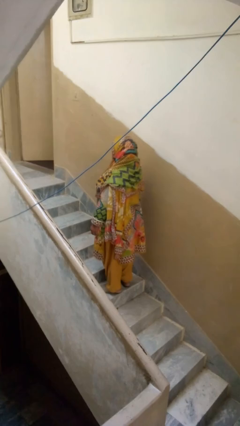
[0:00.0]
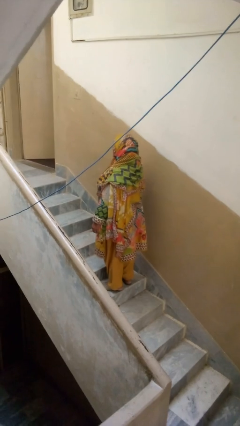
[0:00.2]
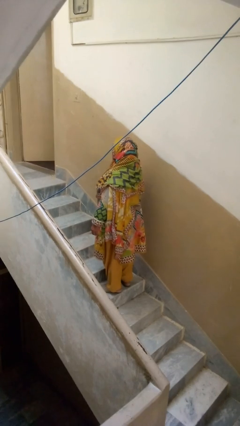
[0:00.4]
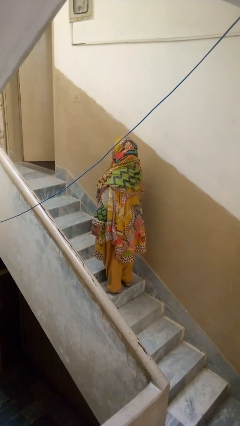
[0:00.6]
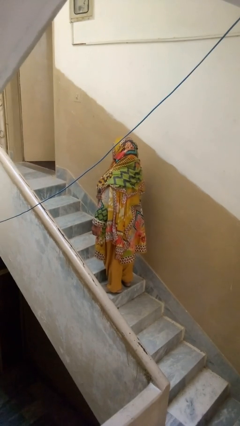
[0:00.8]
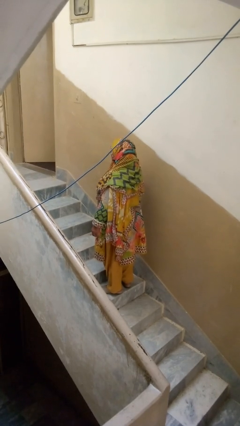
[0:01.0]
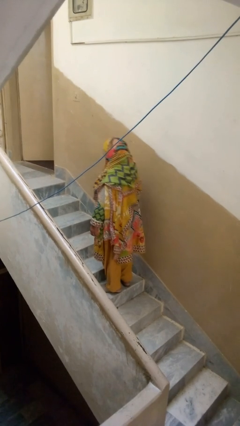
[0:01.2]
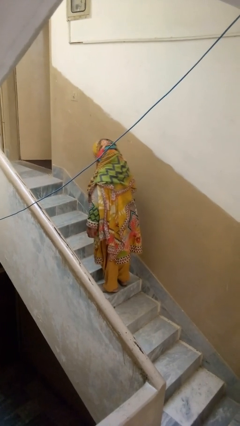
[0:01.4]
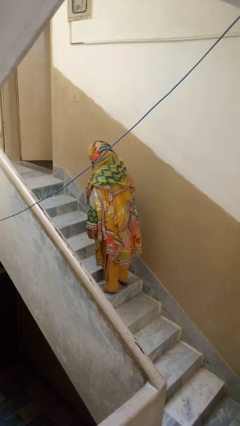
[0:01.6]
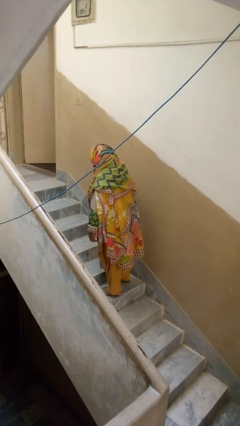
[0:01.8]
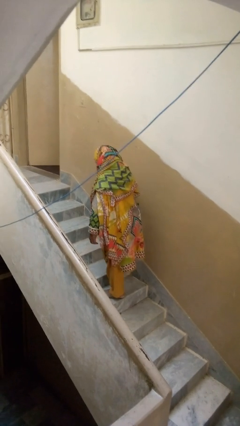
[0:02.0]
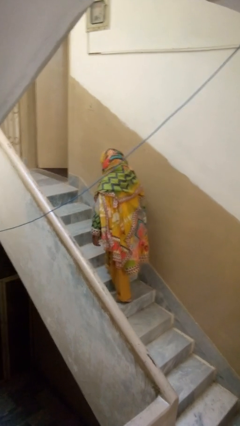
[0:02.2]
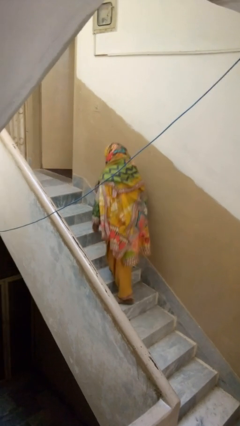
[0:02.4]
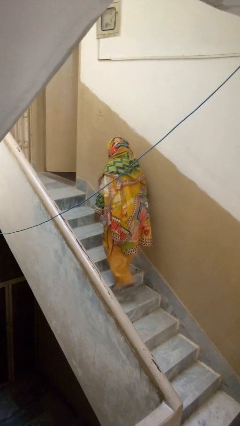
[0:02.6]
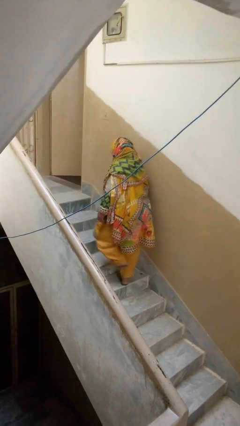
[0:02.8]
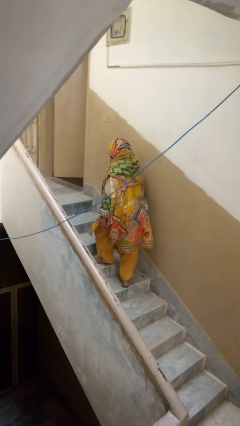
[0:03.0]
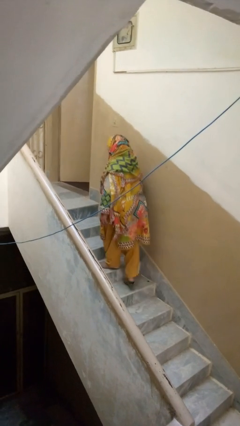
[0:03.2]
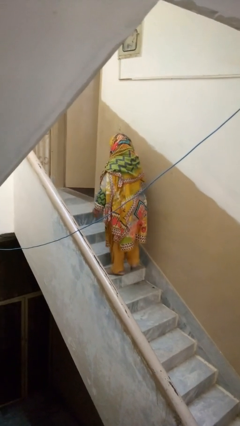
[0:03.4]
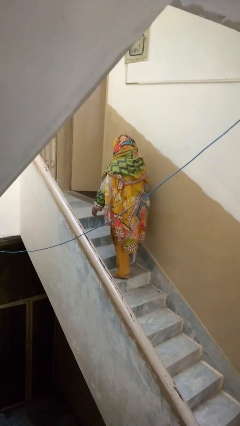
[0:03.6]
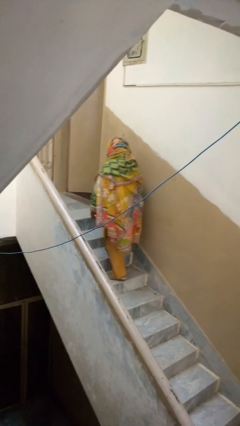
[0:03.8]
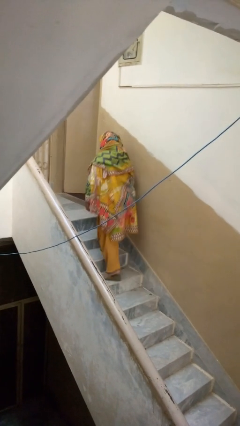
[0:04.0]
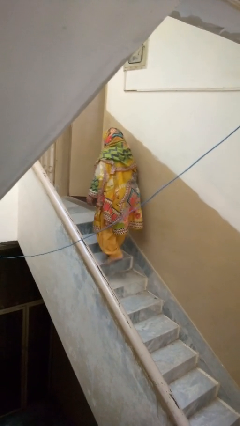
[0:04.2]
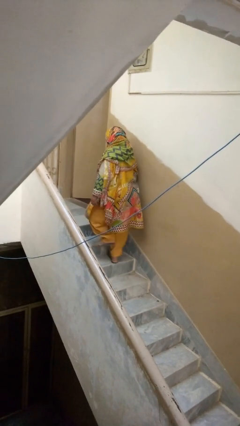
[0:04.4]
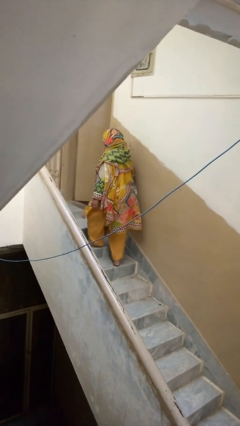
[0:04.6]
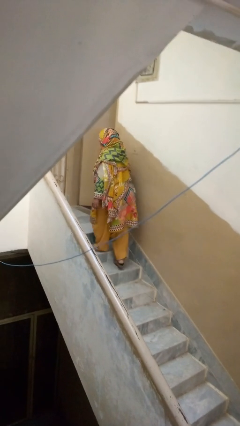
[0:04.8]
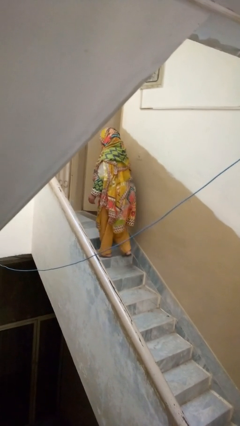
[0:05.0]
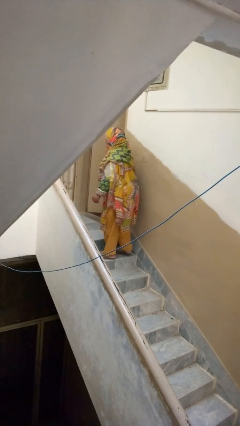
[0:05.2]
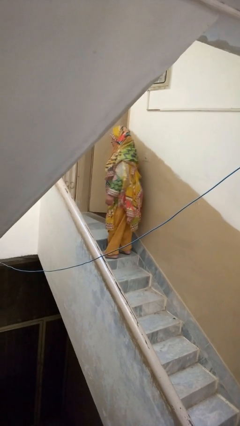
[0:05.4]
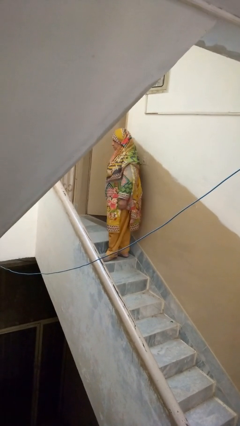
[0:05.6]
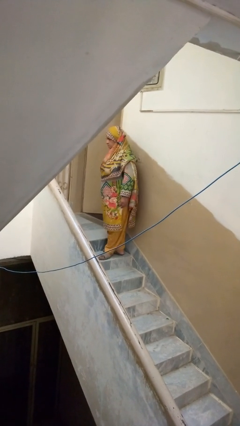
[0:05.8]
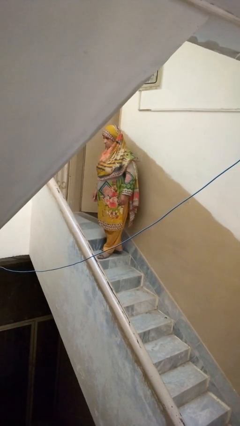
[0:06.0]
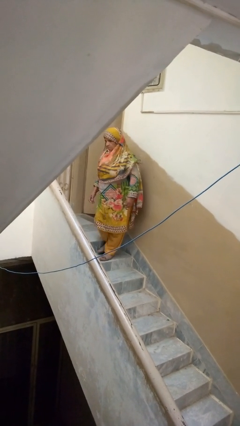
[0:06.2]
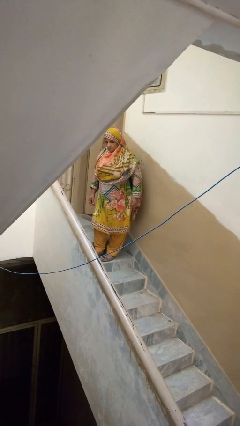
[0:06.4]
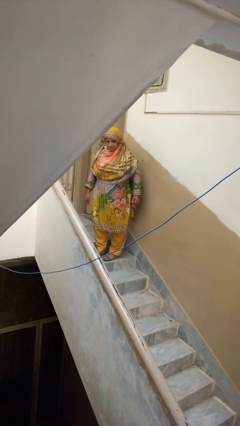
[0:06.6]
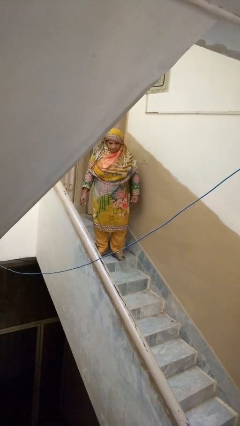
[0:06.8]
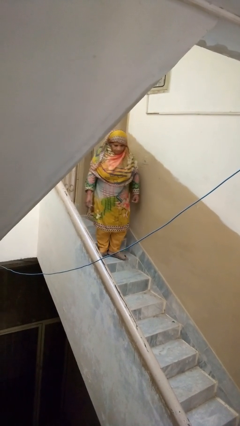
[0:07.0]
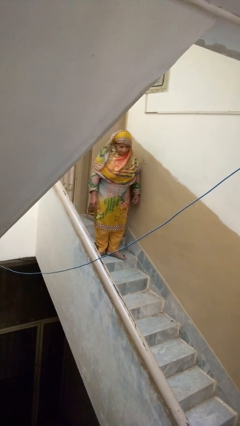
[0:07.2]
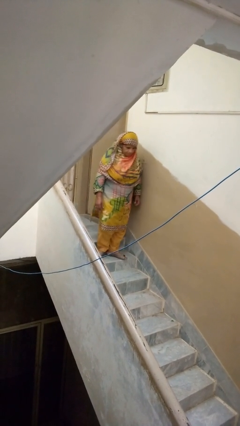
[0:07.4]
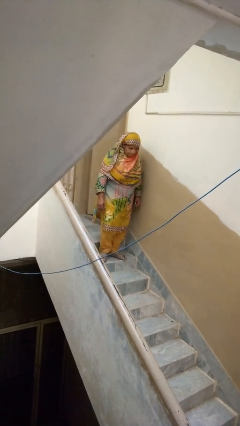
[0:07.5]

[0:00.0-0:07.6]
person climbs up stairs

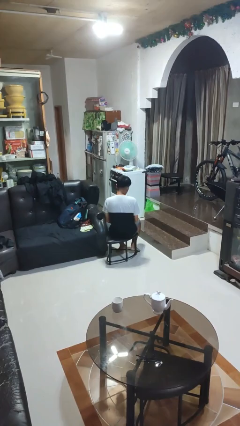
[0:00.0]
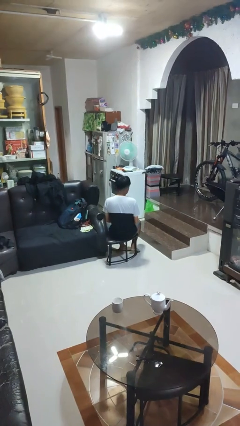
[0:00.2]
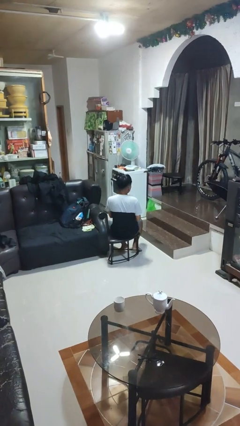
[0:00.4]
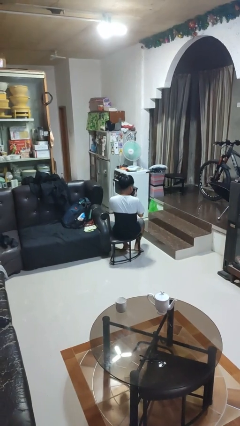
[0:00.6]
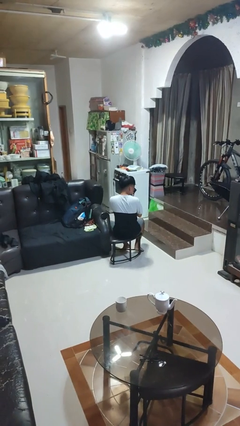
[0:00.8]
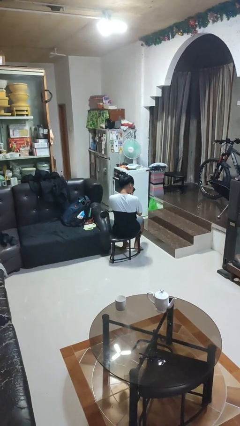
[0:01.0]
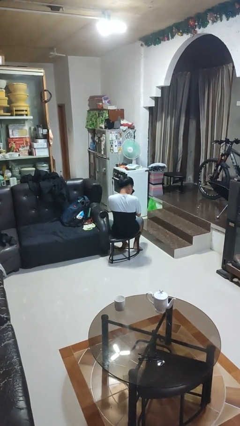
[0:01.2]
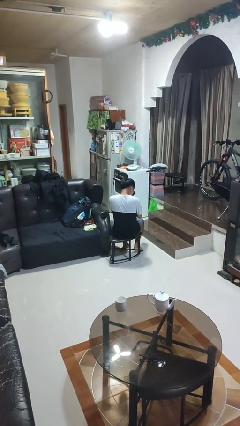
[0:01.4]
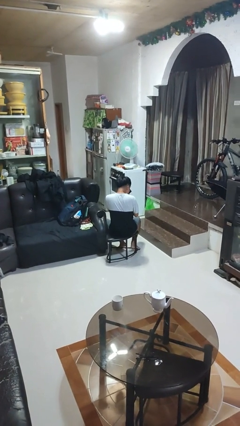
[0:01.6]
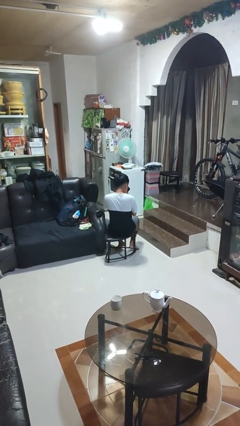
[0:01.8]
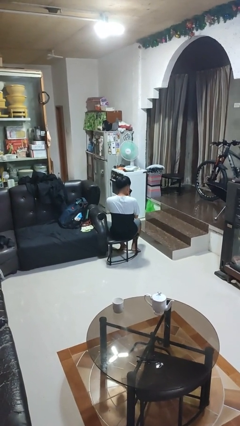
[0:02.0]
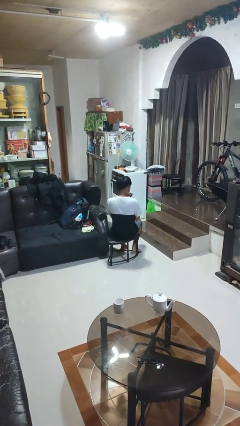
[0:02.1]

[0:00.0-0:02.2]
person dries hair with hairdryer

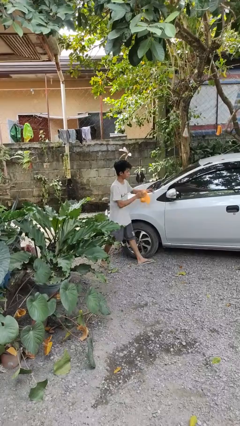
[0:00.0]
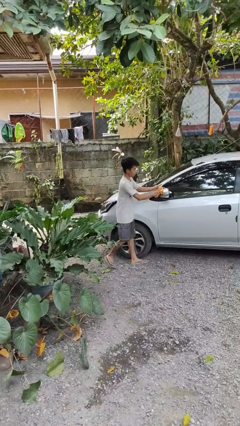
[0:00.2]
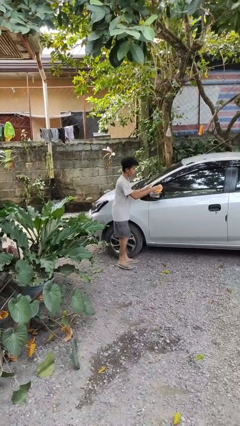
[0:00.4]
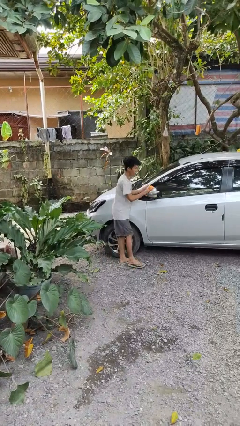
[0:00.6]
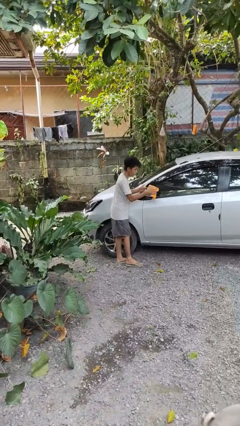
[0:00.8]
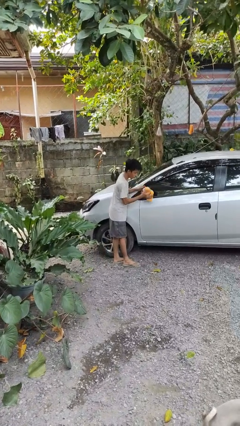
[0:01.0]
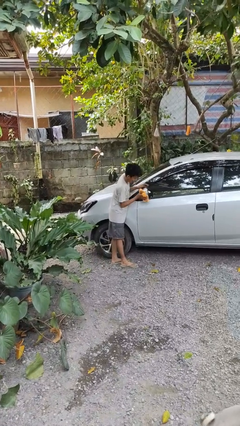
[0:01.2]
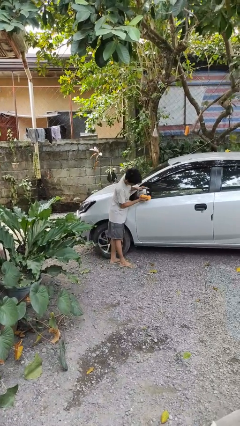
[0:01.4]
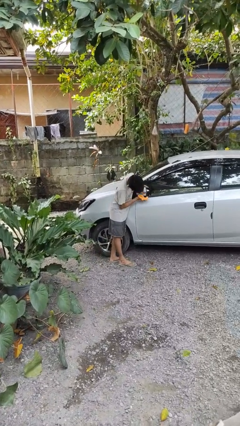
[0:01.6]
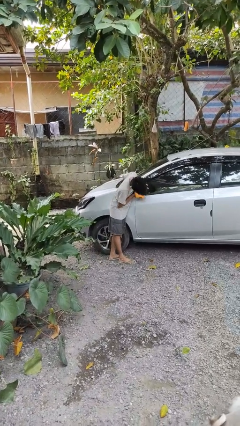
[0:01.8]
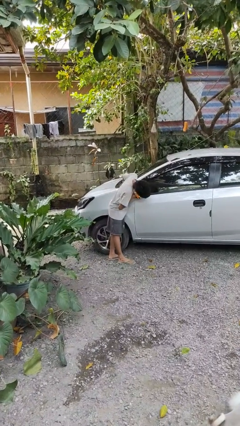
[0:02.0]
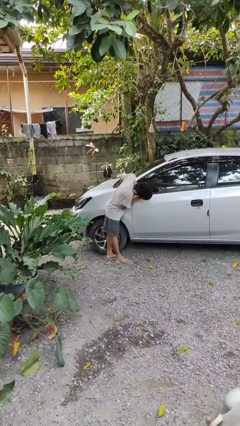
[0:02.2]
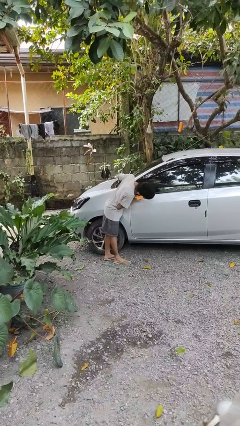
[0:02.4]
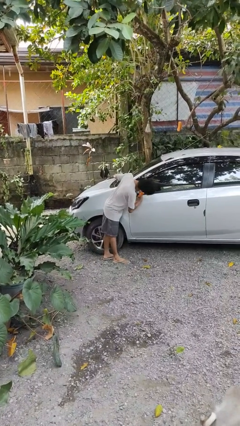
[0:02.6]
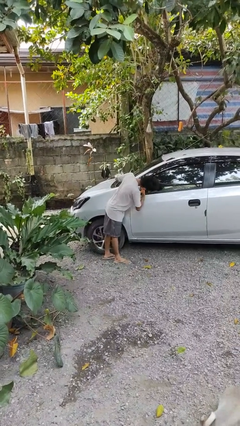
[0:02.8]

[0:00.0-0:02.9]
person polishes car with rag

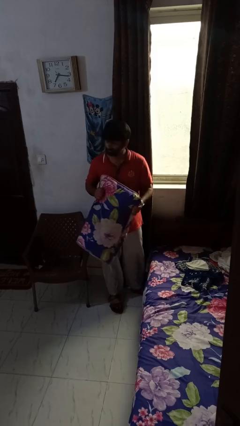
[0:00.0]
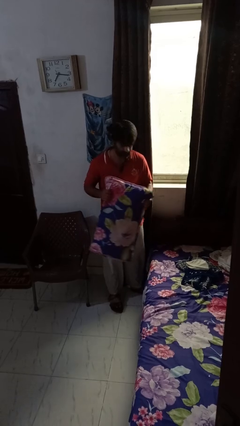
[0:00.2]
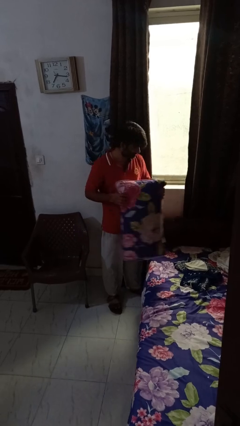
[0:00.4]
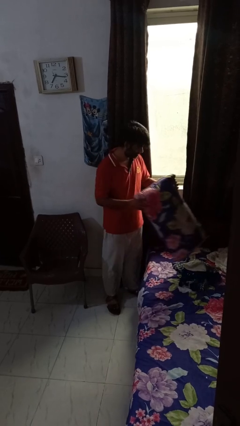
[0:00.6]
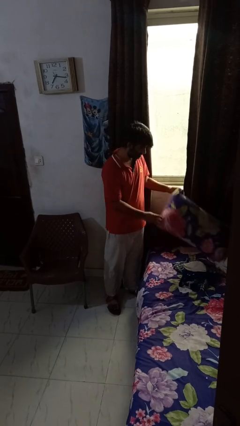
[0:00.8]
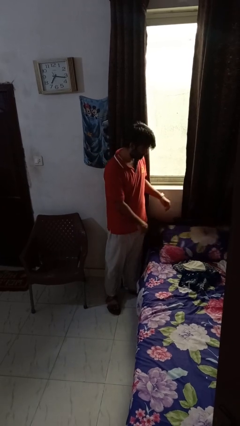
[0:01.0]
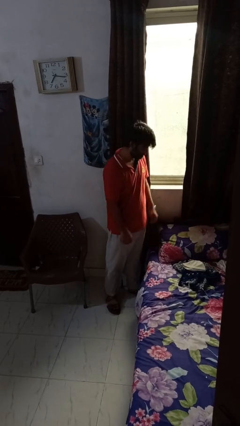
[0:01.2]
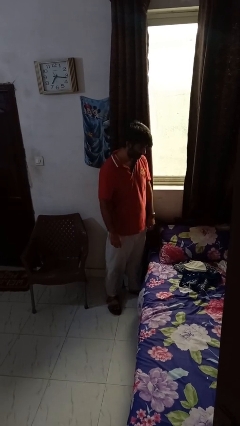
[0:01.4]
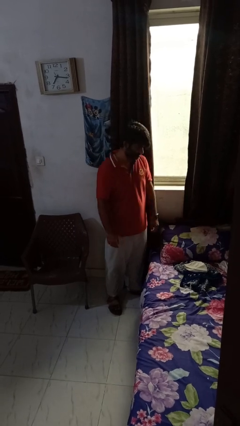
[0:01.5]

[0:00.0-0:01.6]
person puts down object on bed

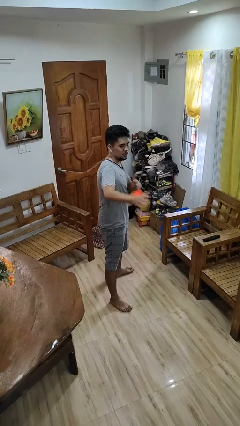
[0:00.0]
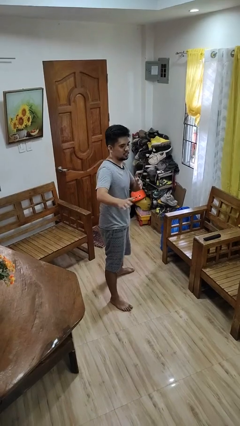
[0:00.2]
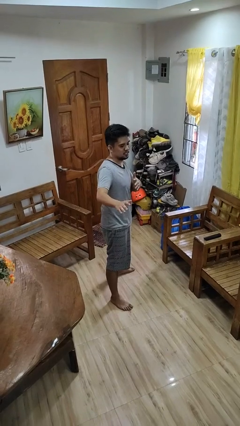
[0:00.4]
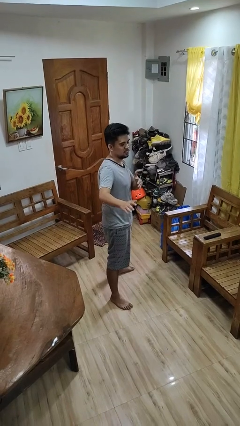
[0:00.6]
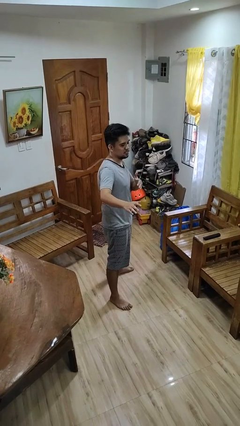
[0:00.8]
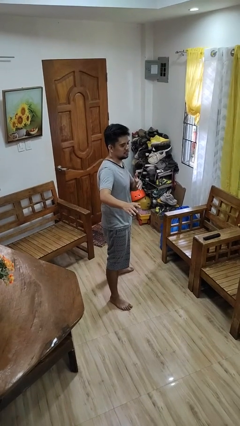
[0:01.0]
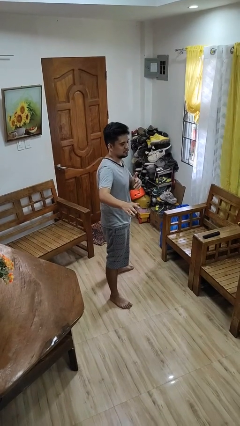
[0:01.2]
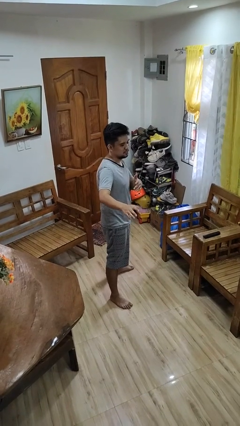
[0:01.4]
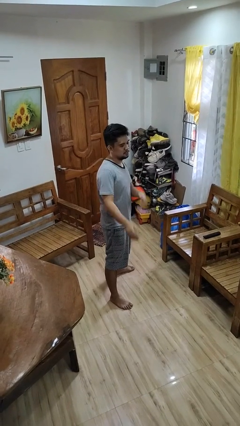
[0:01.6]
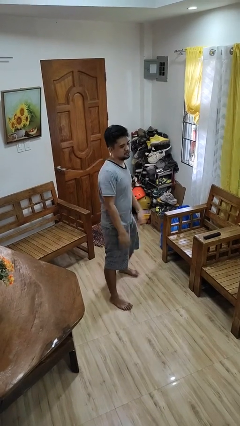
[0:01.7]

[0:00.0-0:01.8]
person karate chop

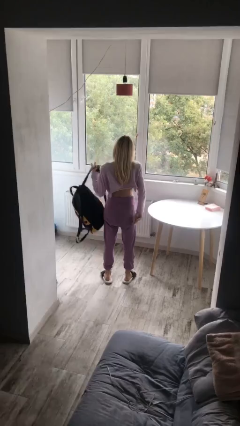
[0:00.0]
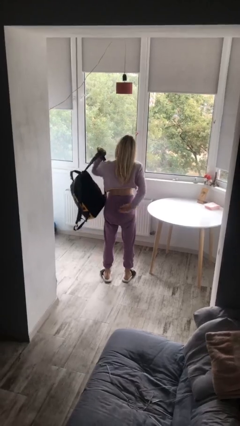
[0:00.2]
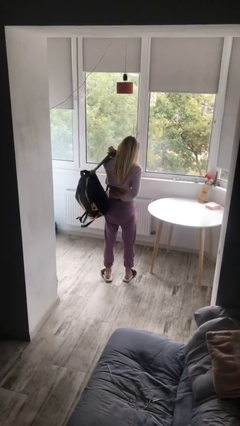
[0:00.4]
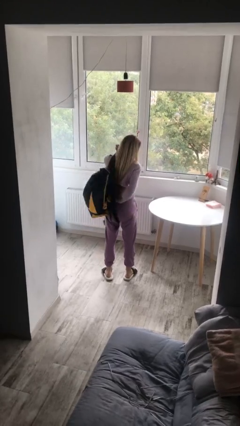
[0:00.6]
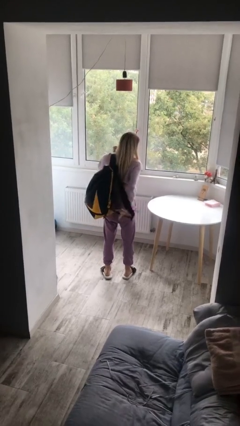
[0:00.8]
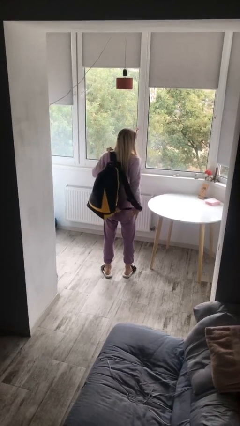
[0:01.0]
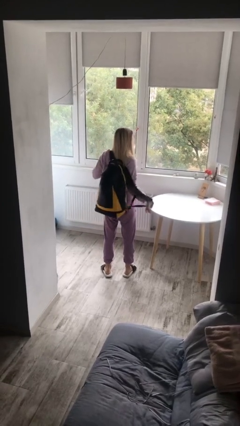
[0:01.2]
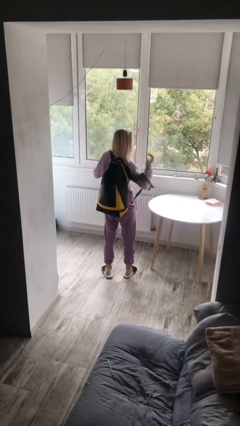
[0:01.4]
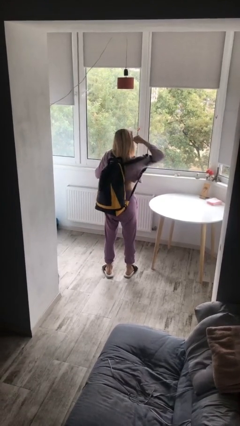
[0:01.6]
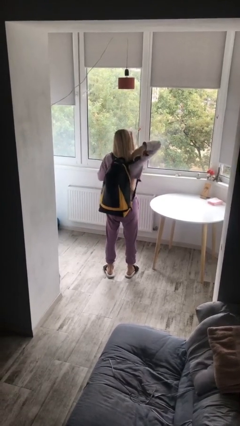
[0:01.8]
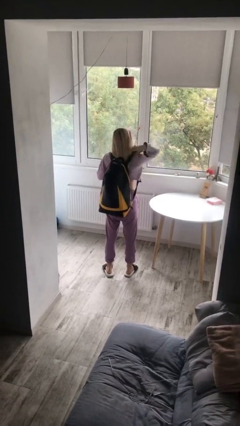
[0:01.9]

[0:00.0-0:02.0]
person puts on backpack
